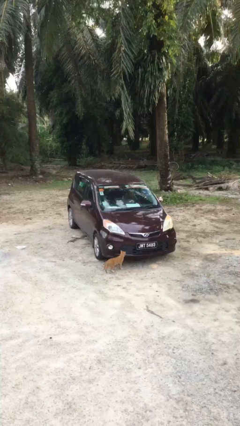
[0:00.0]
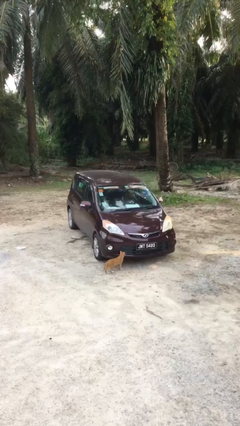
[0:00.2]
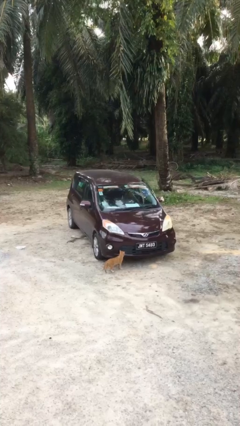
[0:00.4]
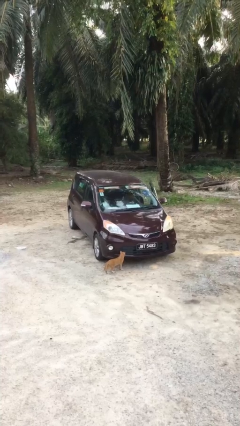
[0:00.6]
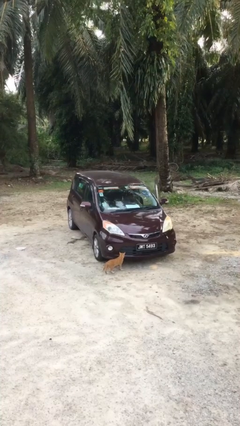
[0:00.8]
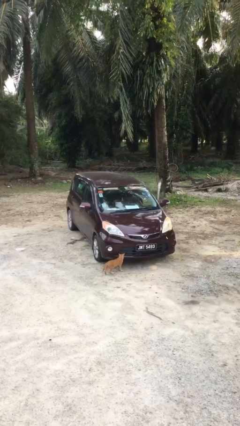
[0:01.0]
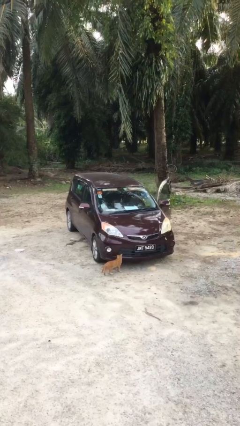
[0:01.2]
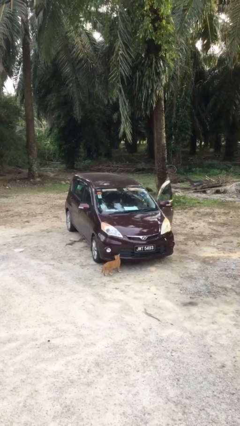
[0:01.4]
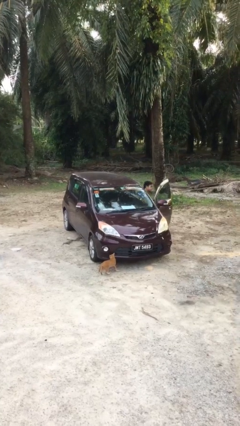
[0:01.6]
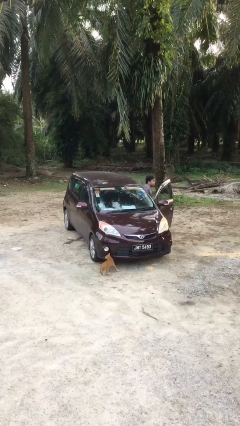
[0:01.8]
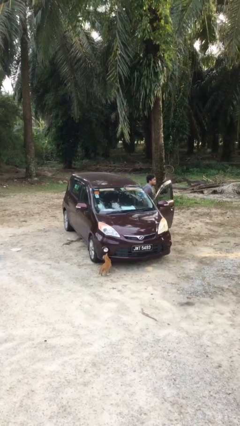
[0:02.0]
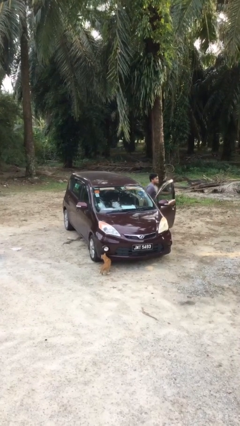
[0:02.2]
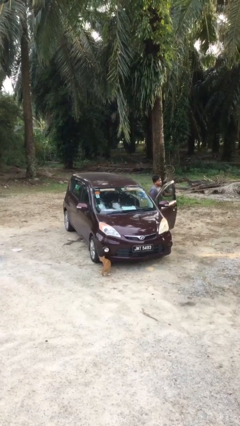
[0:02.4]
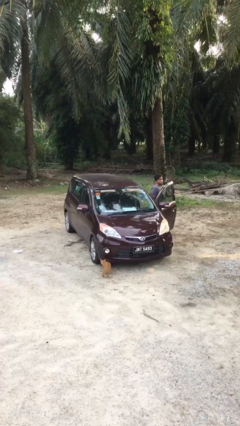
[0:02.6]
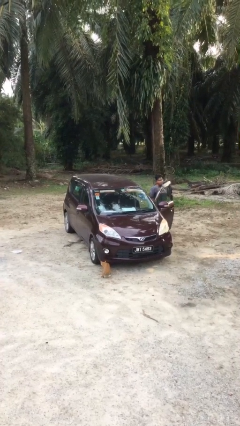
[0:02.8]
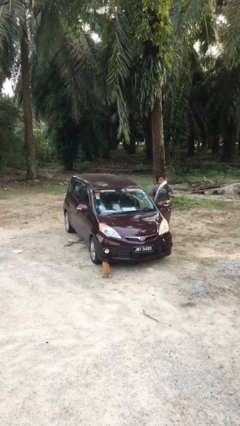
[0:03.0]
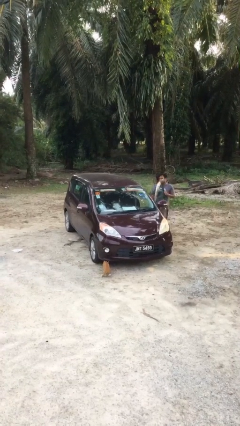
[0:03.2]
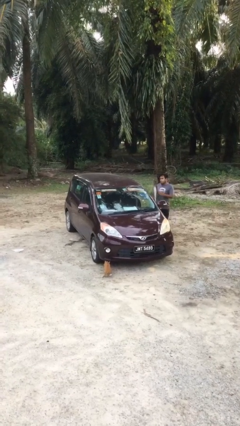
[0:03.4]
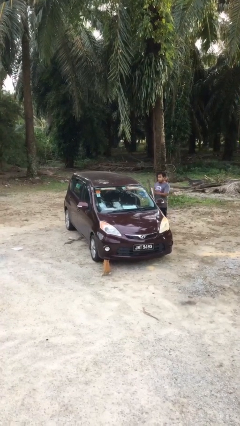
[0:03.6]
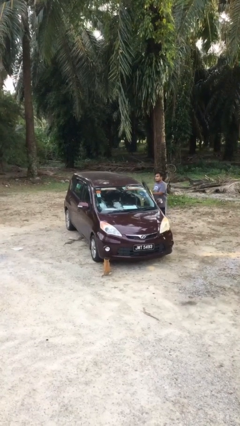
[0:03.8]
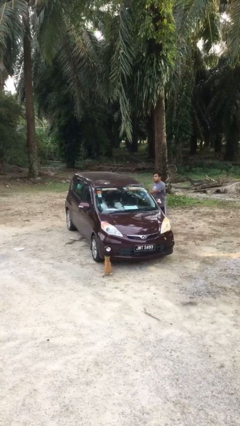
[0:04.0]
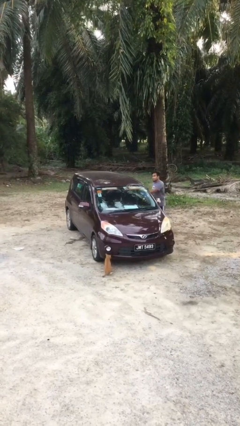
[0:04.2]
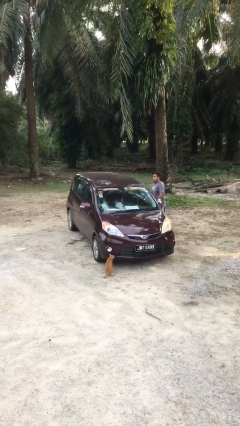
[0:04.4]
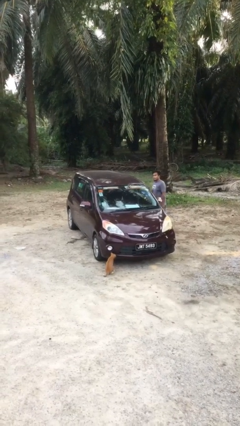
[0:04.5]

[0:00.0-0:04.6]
car drops off person

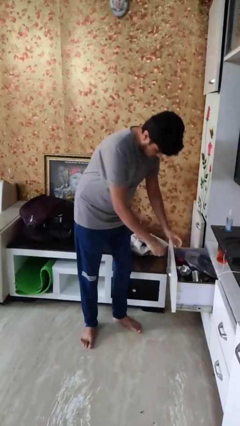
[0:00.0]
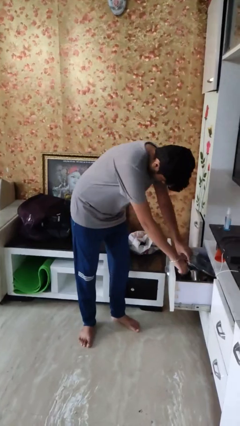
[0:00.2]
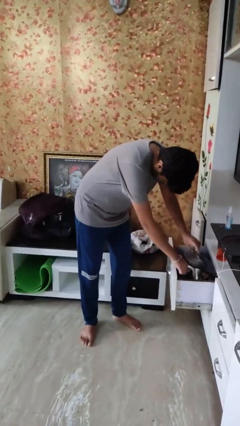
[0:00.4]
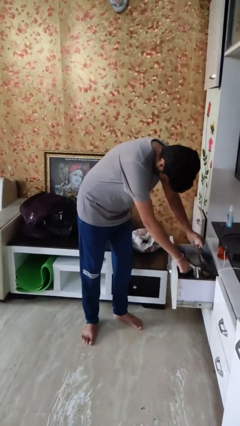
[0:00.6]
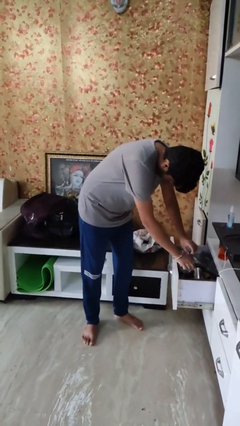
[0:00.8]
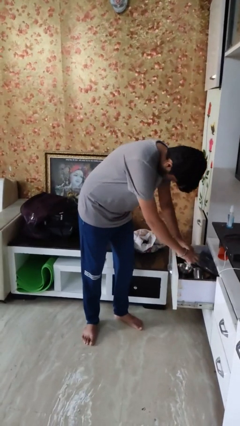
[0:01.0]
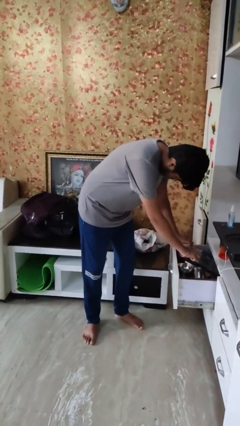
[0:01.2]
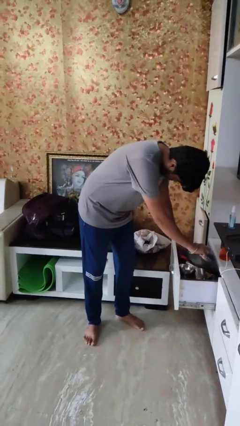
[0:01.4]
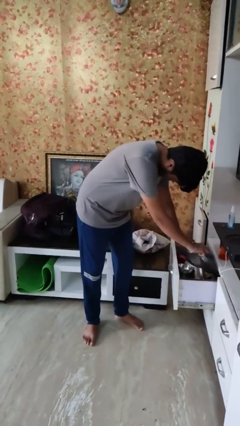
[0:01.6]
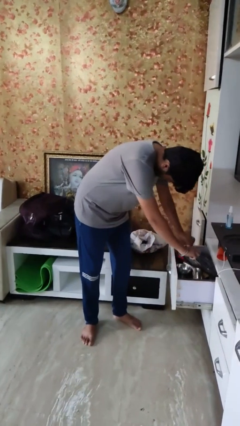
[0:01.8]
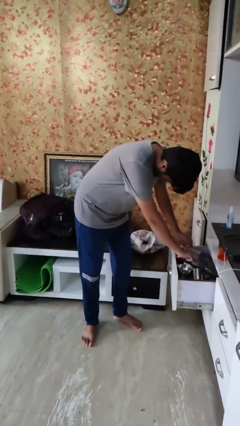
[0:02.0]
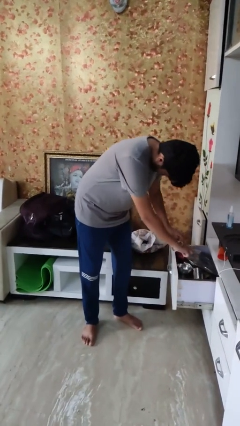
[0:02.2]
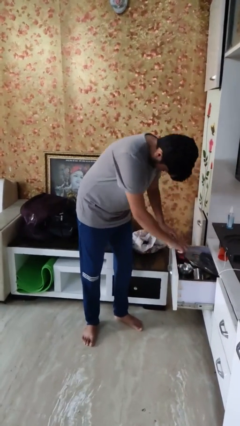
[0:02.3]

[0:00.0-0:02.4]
person searches in kitchen drawer

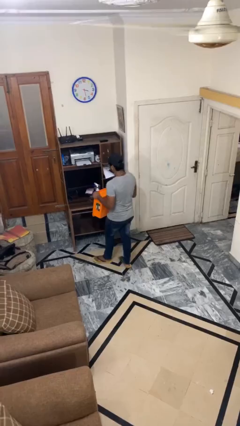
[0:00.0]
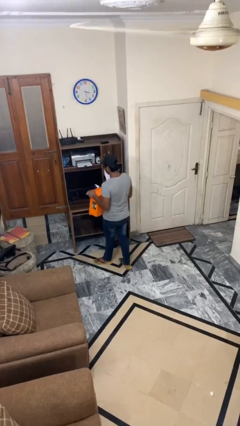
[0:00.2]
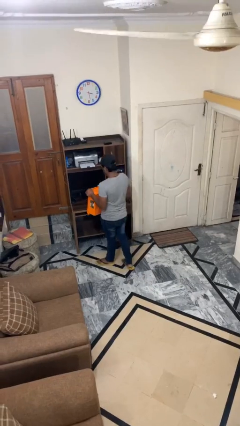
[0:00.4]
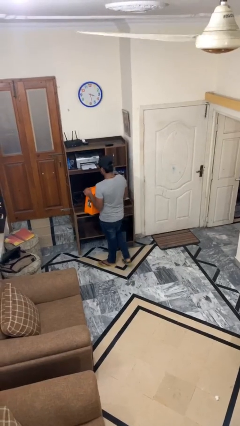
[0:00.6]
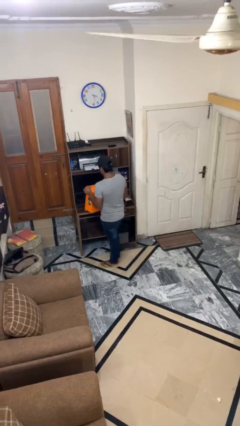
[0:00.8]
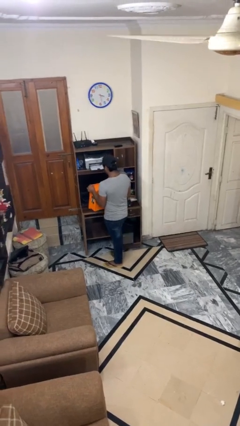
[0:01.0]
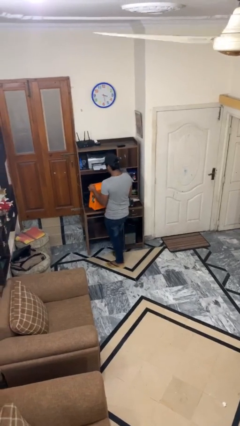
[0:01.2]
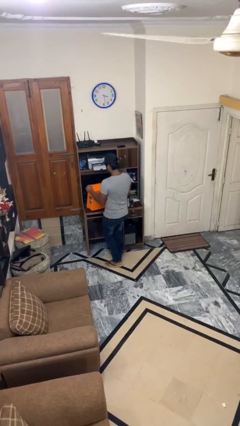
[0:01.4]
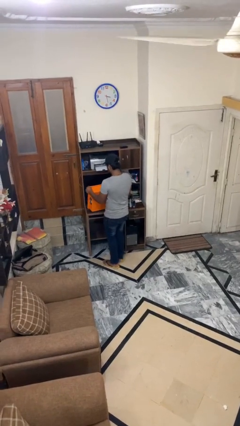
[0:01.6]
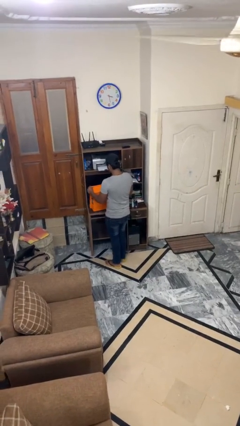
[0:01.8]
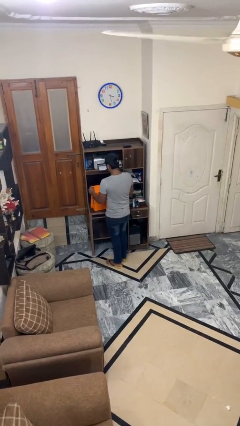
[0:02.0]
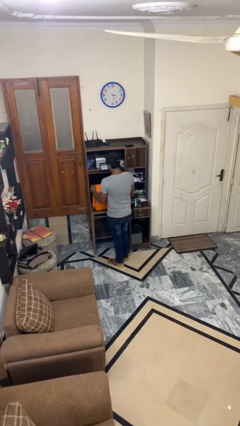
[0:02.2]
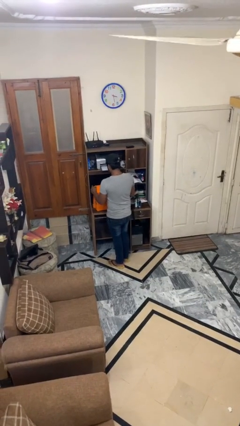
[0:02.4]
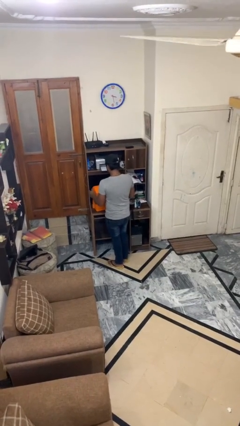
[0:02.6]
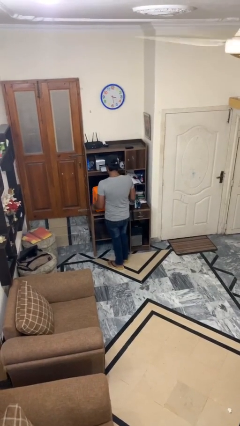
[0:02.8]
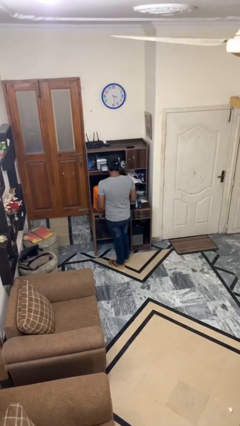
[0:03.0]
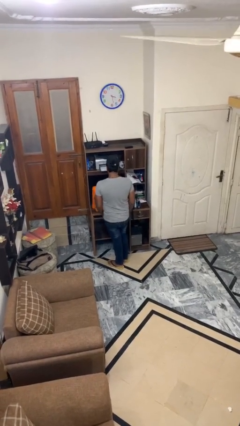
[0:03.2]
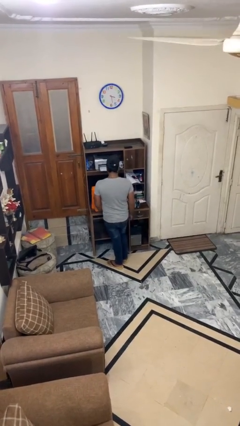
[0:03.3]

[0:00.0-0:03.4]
person puts down object on table

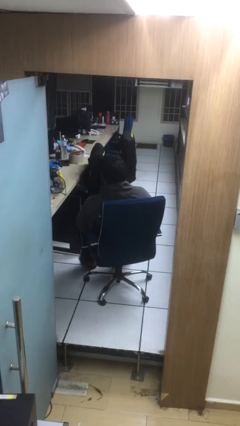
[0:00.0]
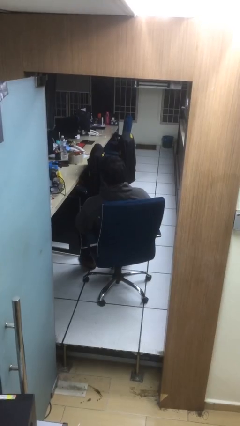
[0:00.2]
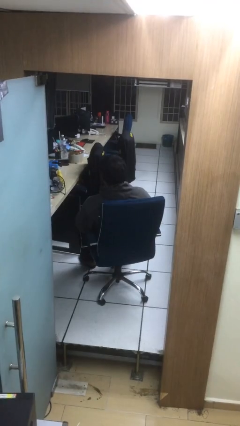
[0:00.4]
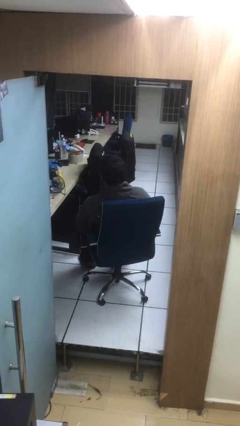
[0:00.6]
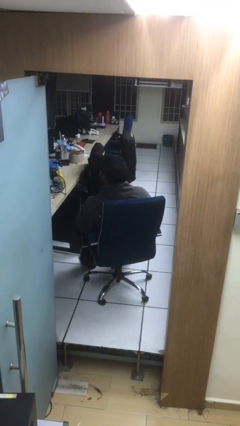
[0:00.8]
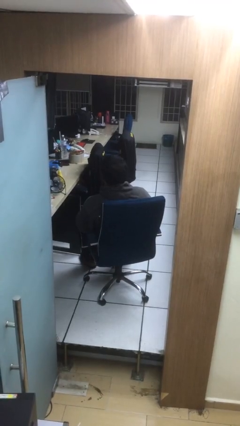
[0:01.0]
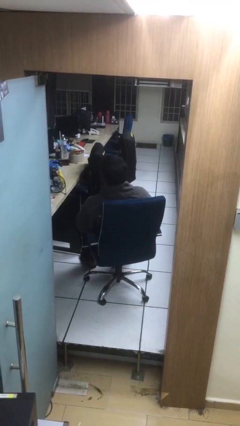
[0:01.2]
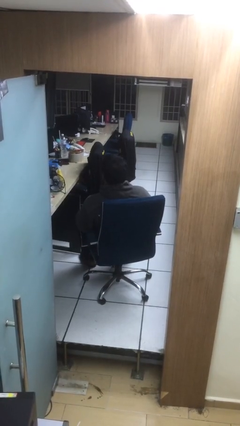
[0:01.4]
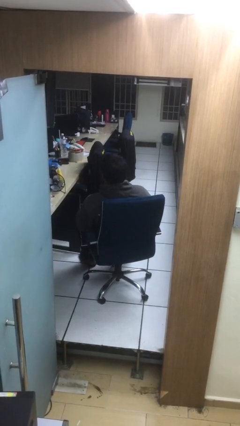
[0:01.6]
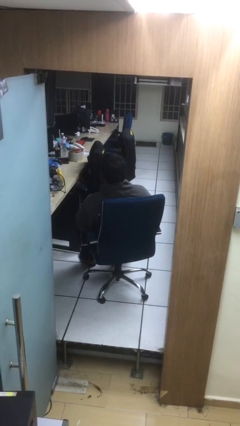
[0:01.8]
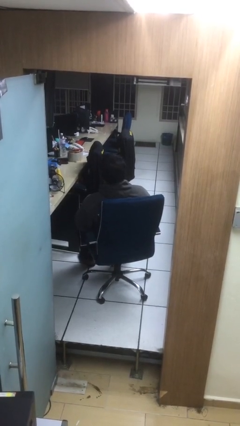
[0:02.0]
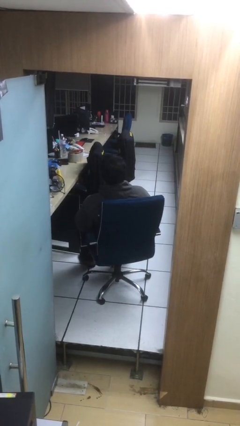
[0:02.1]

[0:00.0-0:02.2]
person shakes head

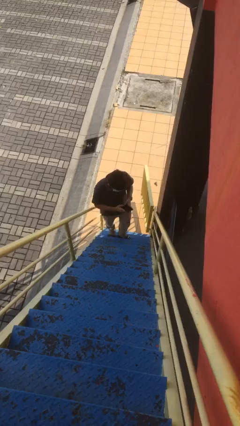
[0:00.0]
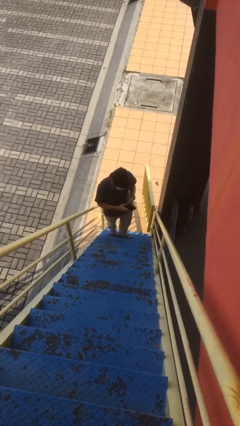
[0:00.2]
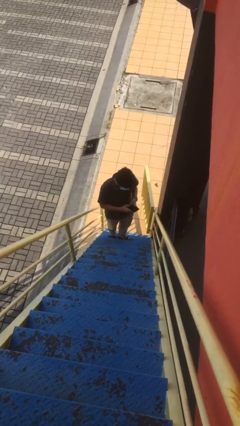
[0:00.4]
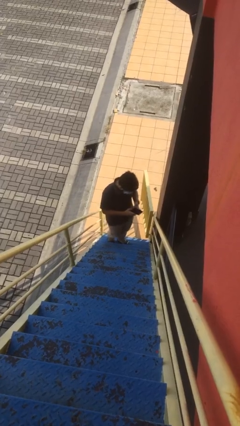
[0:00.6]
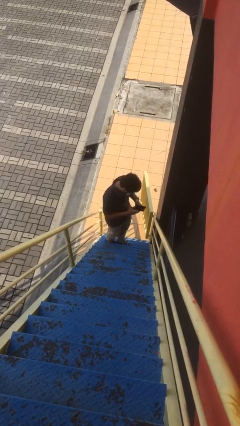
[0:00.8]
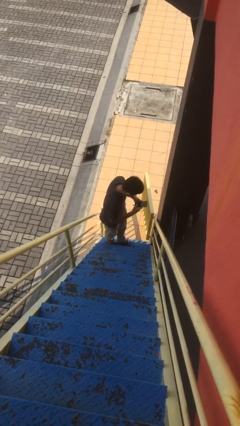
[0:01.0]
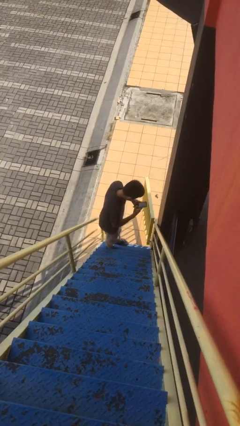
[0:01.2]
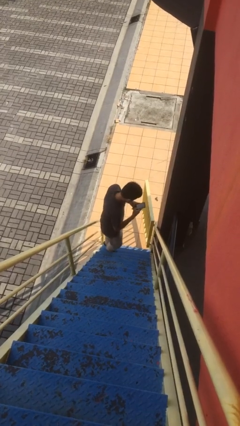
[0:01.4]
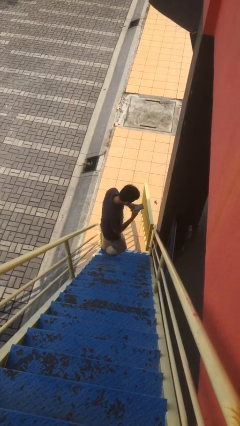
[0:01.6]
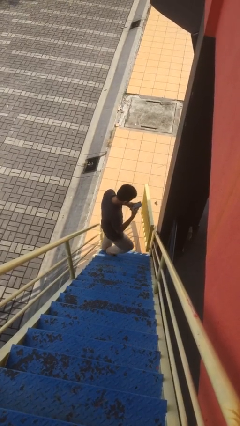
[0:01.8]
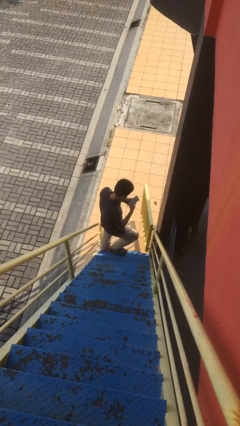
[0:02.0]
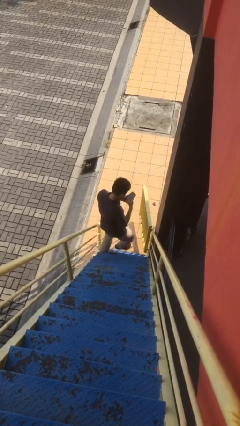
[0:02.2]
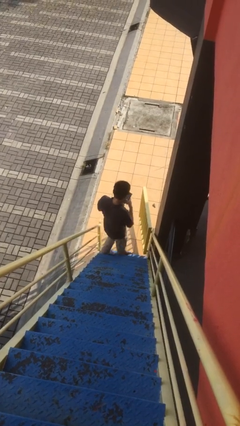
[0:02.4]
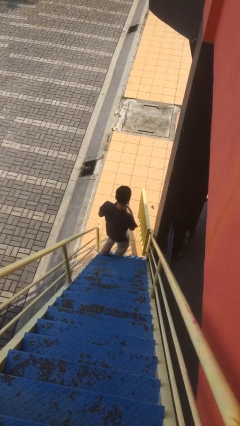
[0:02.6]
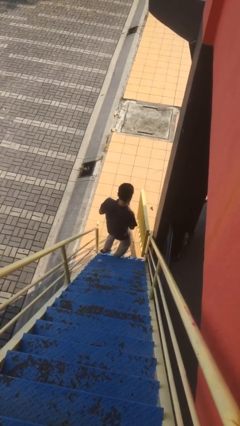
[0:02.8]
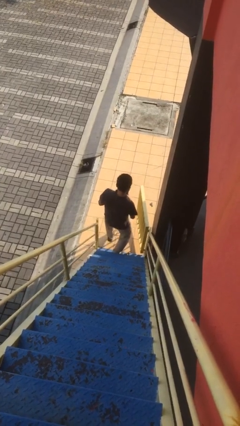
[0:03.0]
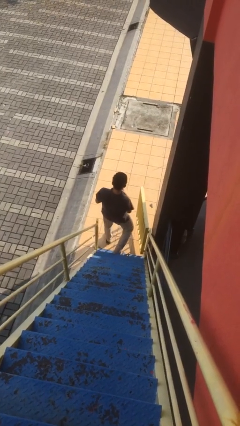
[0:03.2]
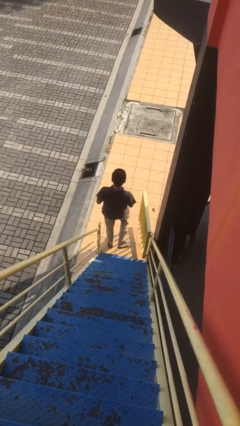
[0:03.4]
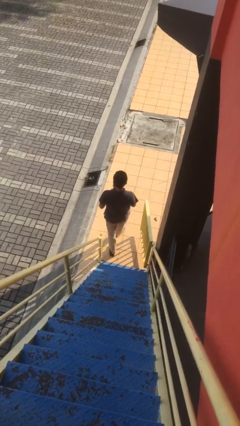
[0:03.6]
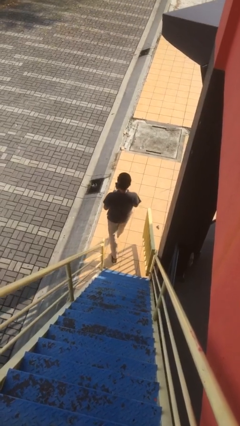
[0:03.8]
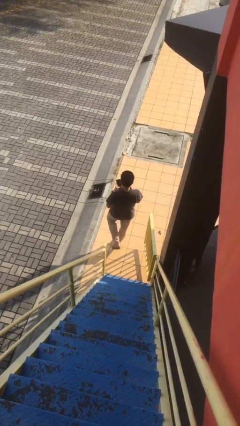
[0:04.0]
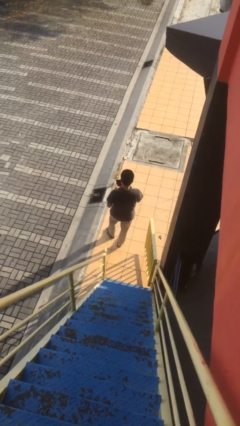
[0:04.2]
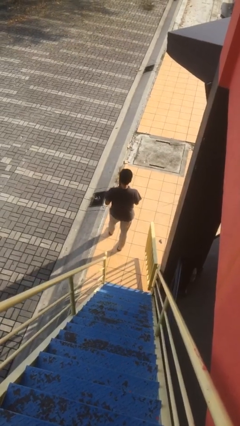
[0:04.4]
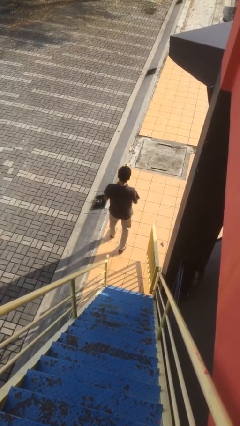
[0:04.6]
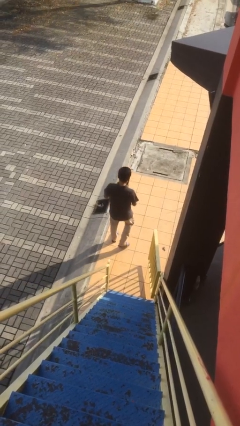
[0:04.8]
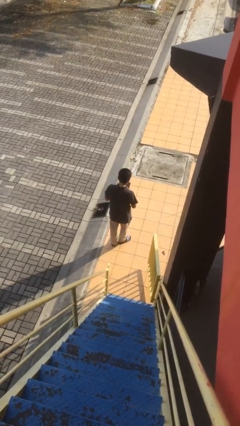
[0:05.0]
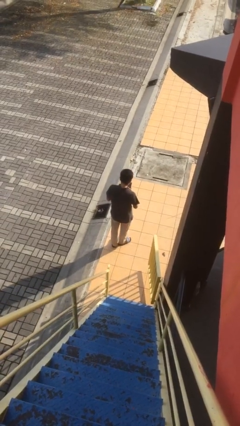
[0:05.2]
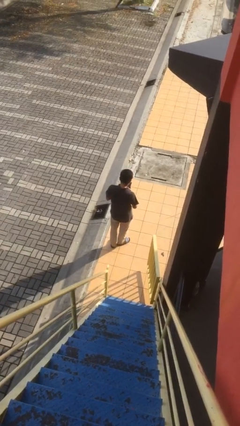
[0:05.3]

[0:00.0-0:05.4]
person exits scene through structure
